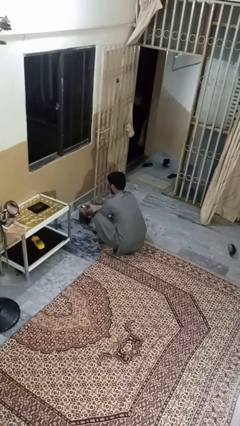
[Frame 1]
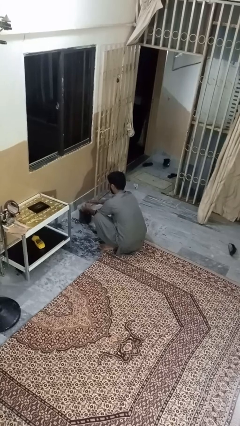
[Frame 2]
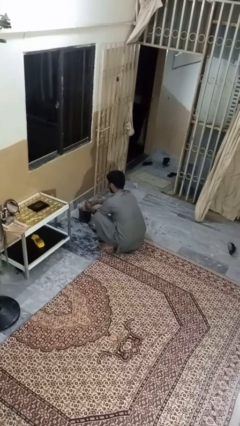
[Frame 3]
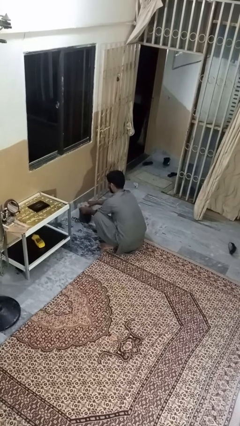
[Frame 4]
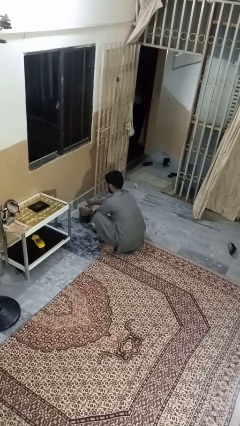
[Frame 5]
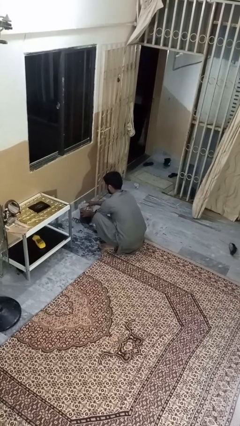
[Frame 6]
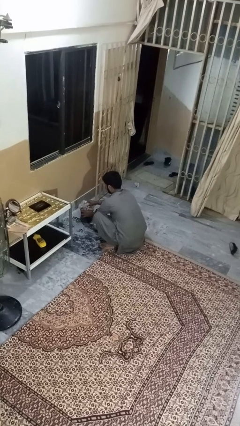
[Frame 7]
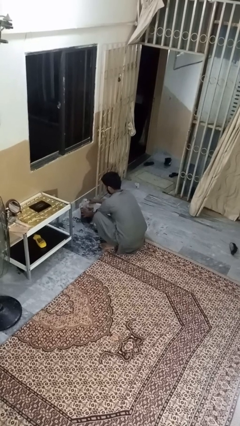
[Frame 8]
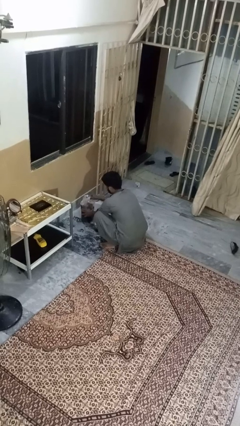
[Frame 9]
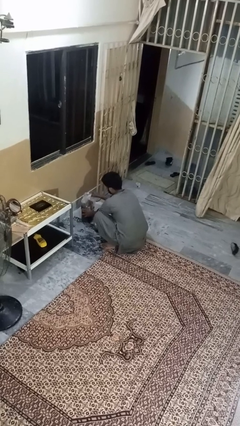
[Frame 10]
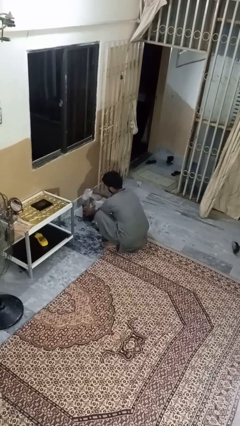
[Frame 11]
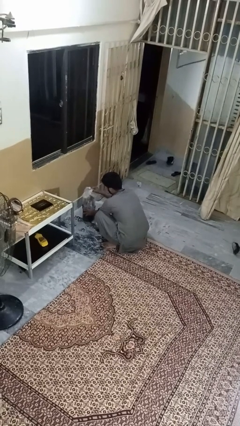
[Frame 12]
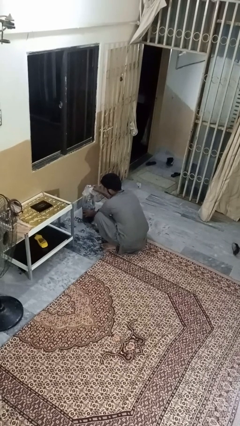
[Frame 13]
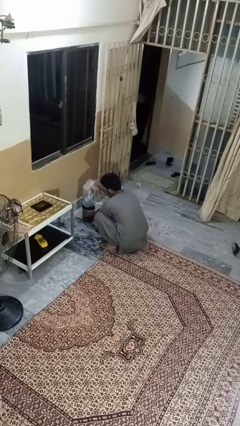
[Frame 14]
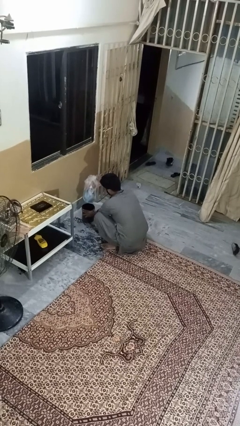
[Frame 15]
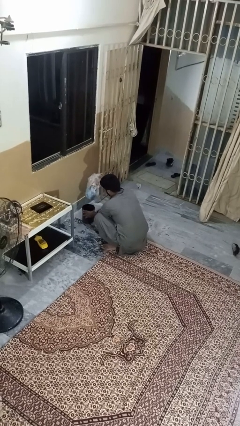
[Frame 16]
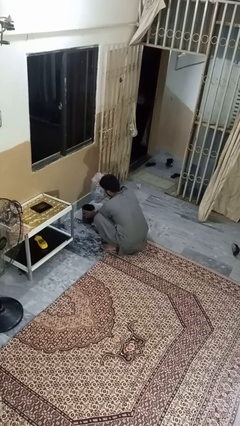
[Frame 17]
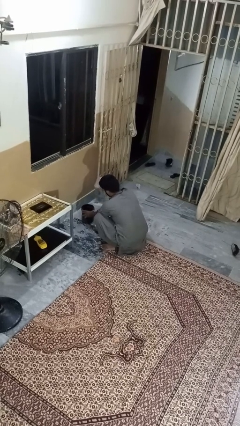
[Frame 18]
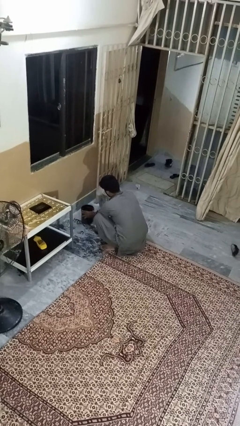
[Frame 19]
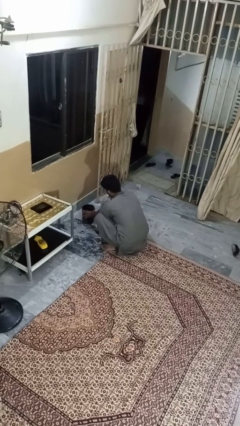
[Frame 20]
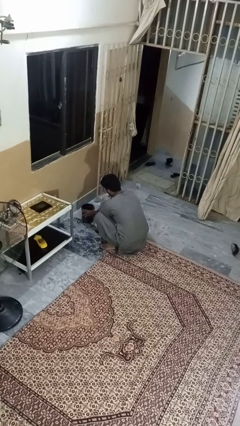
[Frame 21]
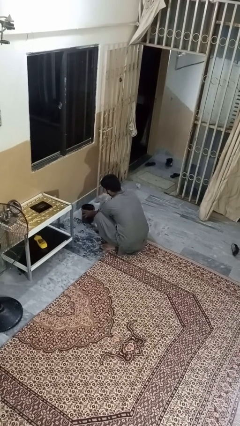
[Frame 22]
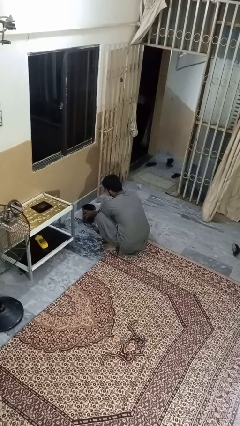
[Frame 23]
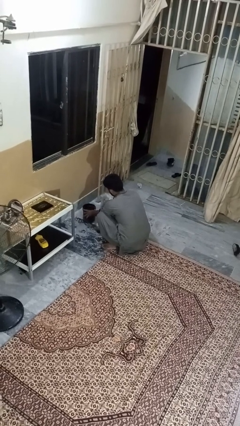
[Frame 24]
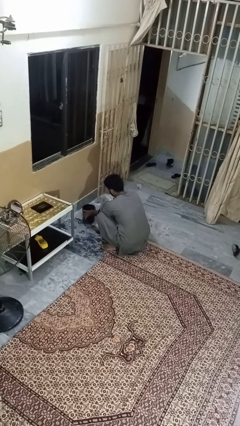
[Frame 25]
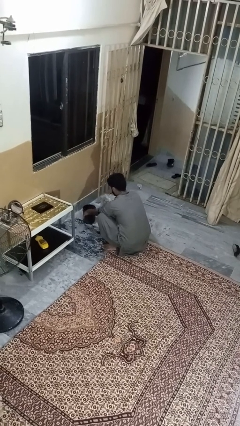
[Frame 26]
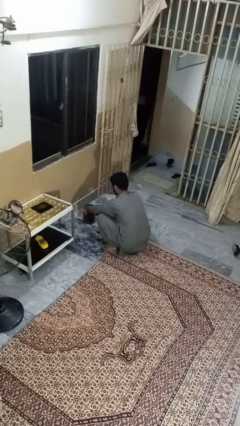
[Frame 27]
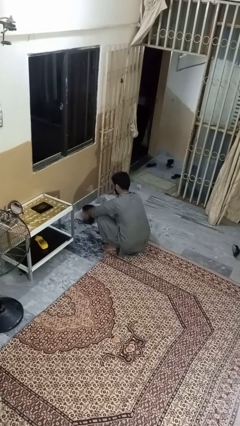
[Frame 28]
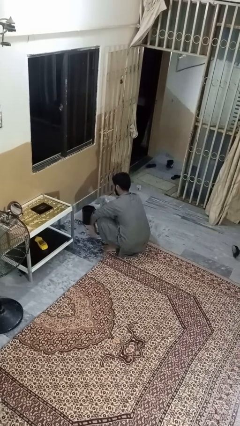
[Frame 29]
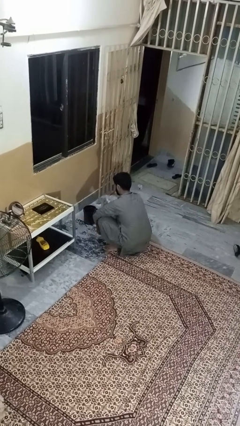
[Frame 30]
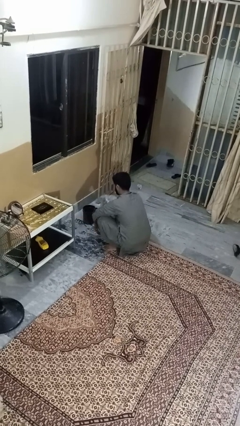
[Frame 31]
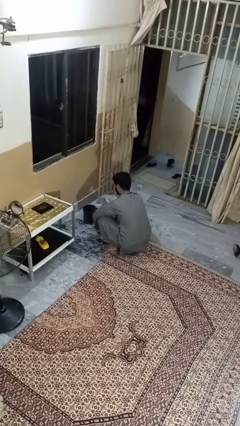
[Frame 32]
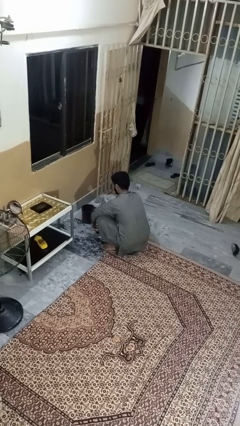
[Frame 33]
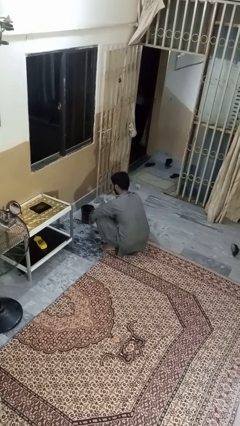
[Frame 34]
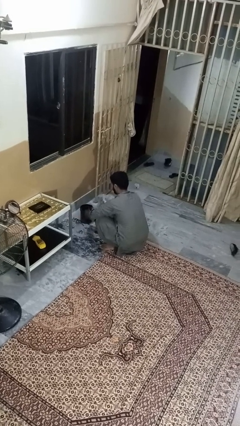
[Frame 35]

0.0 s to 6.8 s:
person removes trashbag from trashcan

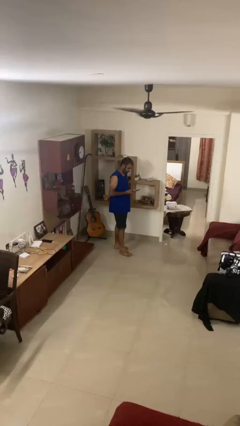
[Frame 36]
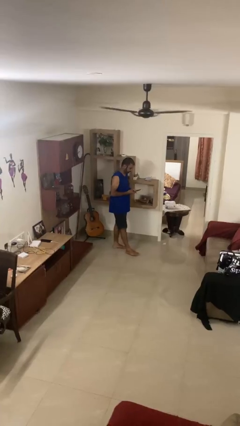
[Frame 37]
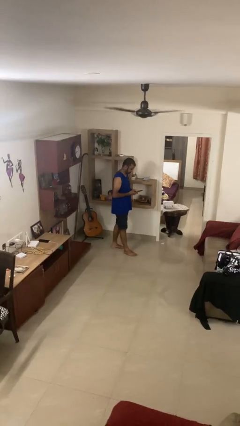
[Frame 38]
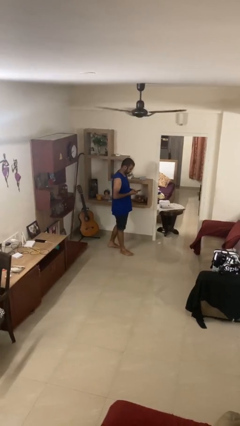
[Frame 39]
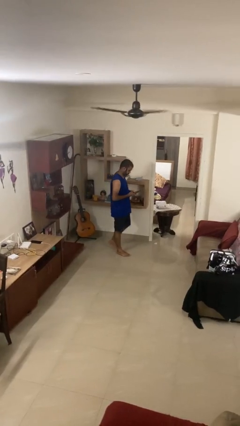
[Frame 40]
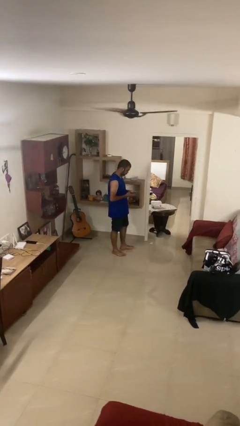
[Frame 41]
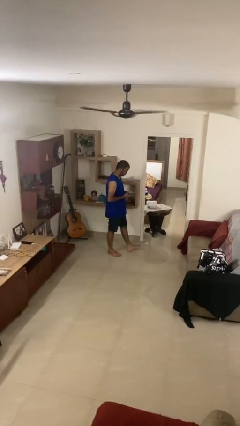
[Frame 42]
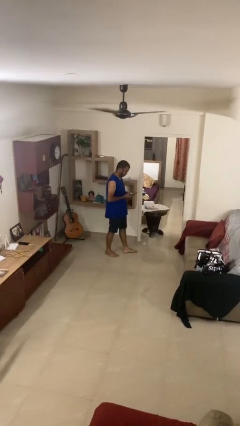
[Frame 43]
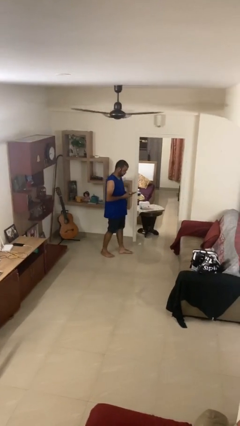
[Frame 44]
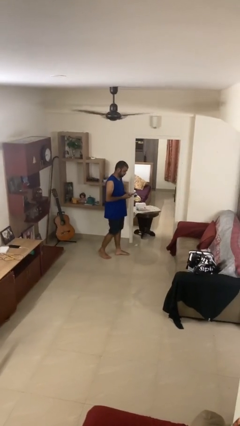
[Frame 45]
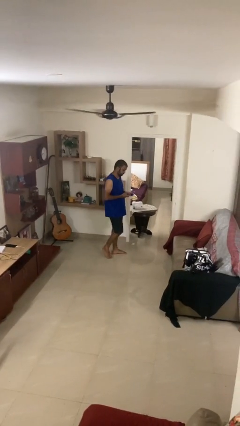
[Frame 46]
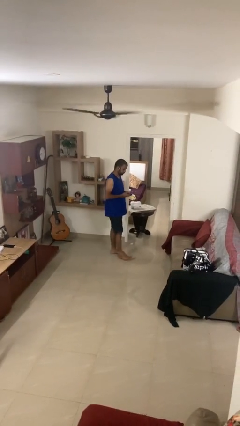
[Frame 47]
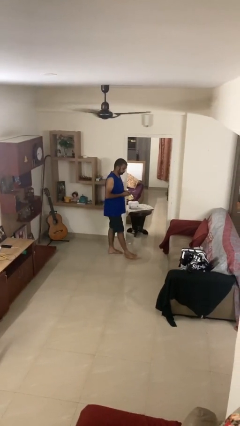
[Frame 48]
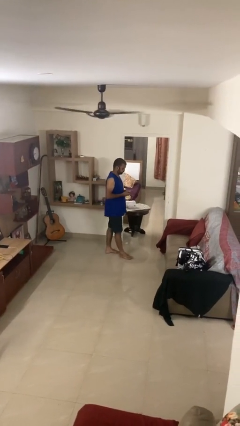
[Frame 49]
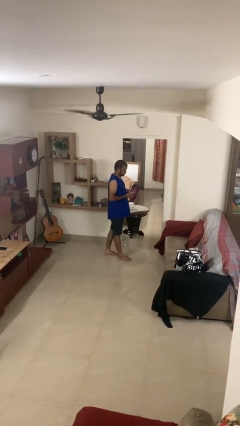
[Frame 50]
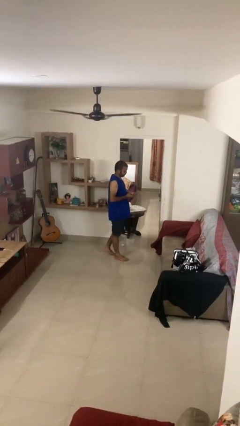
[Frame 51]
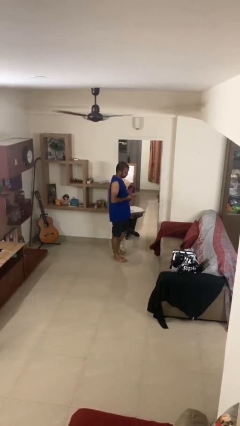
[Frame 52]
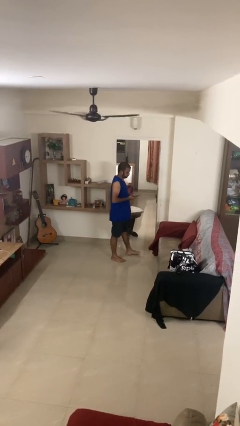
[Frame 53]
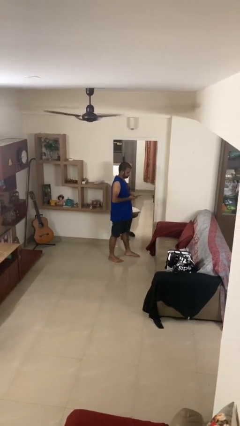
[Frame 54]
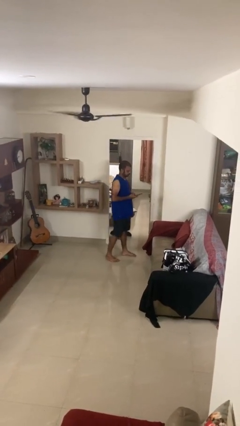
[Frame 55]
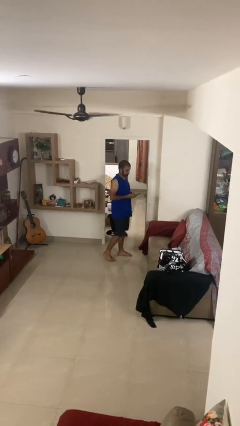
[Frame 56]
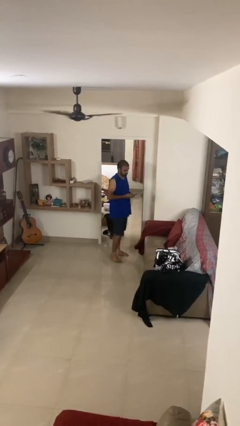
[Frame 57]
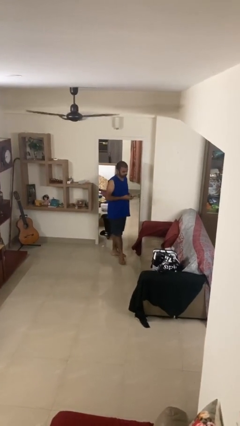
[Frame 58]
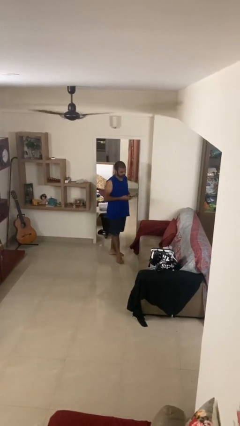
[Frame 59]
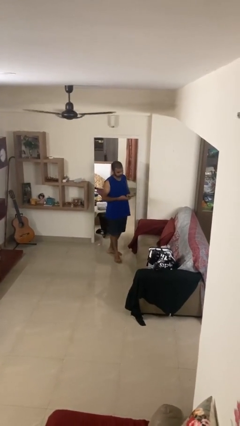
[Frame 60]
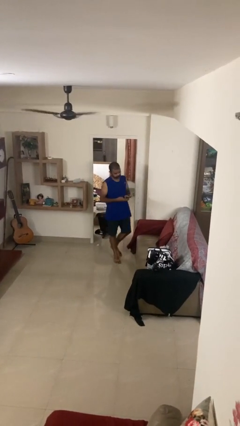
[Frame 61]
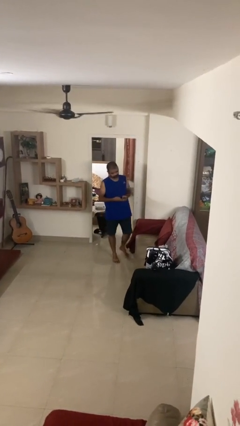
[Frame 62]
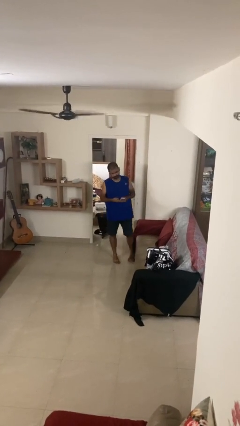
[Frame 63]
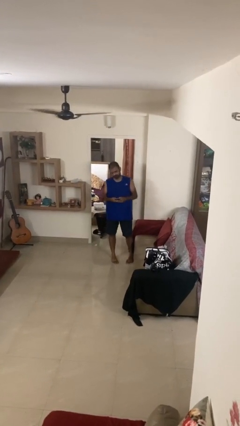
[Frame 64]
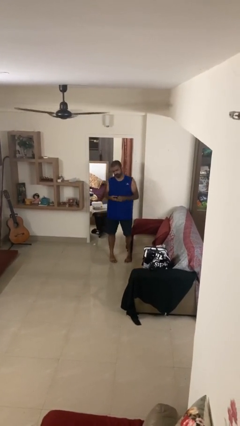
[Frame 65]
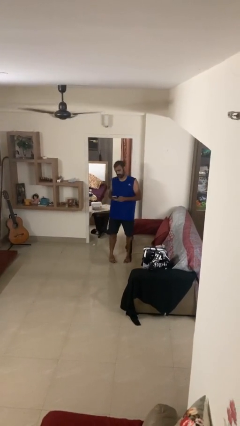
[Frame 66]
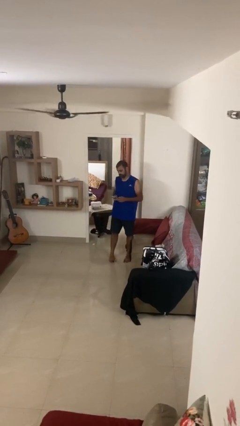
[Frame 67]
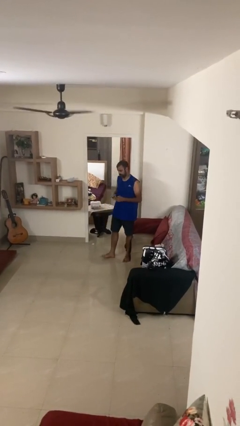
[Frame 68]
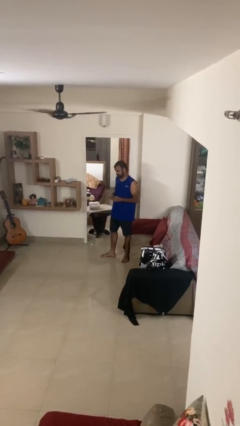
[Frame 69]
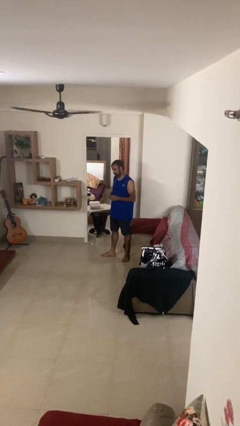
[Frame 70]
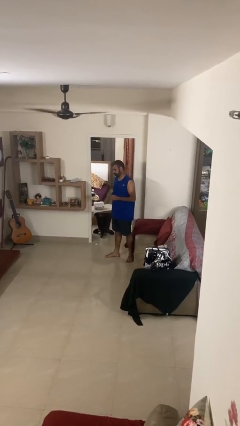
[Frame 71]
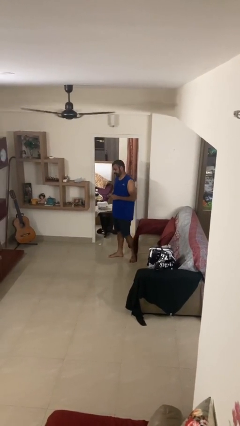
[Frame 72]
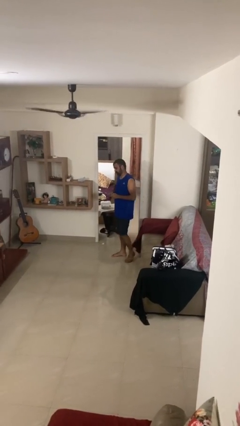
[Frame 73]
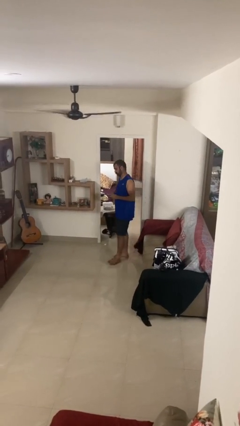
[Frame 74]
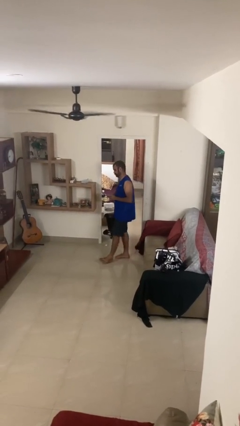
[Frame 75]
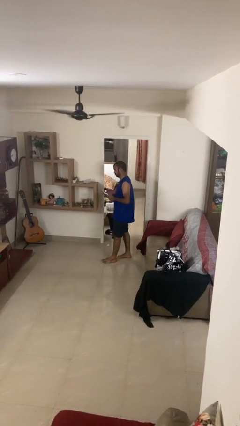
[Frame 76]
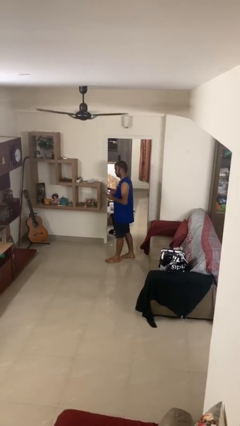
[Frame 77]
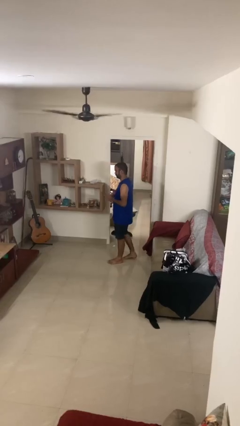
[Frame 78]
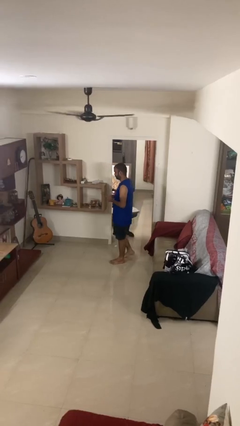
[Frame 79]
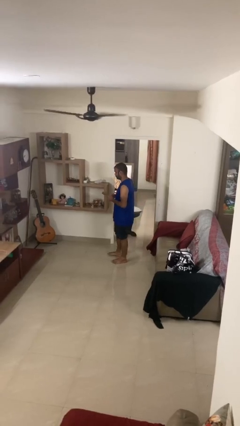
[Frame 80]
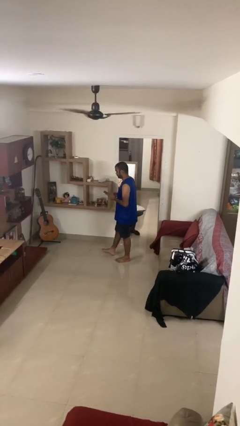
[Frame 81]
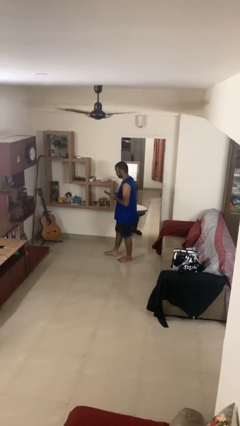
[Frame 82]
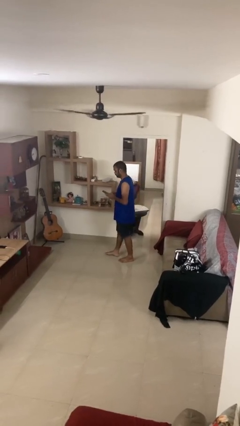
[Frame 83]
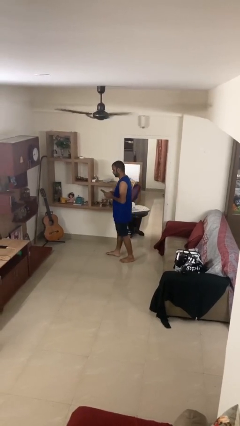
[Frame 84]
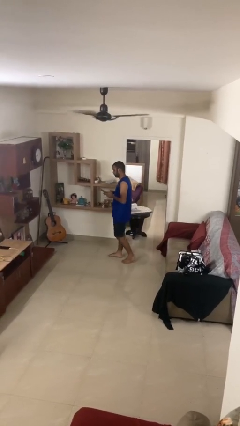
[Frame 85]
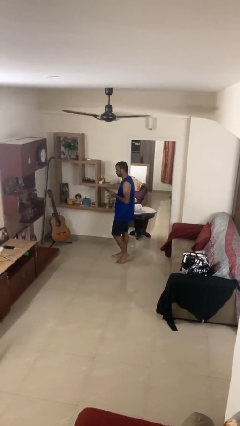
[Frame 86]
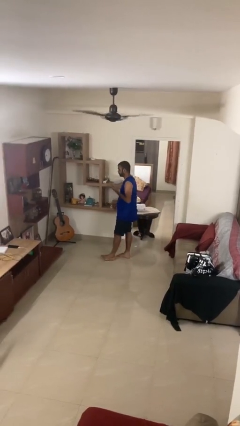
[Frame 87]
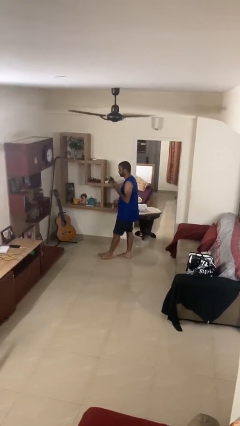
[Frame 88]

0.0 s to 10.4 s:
person texts on phone

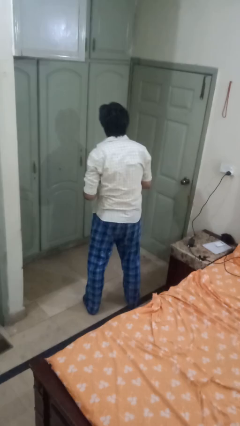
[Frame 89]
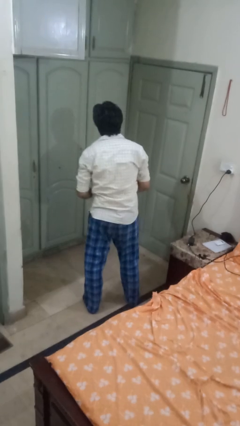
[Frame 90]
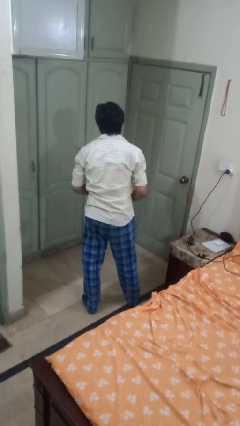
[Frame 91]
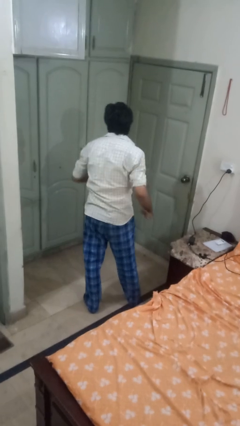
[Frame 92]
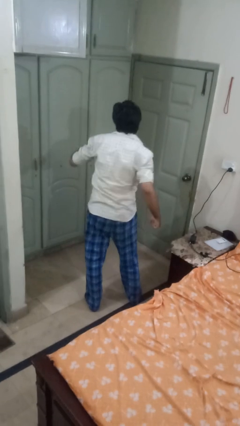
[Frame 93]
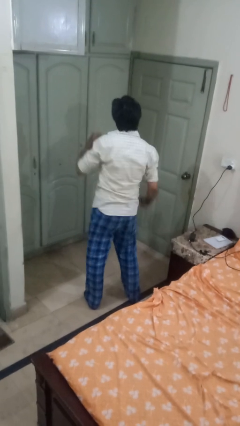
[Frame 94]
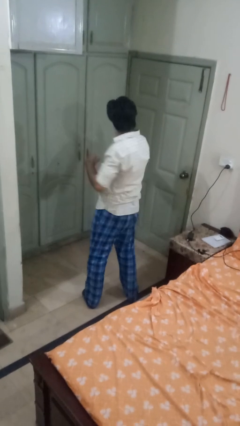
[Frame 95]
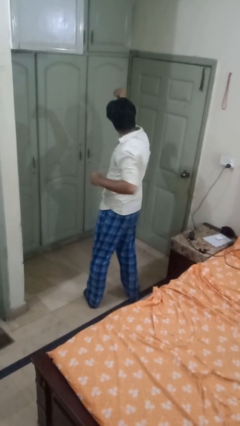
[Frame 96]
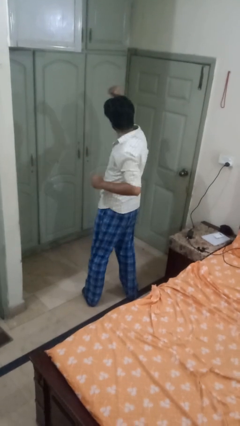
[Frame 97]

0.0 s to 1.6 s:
person punches
